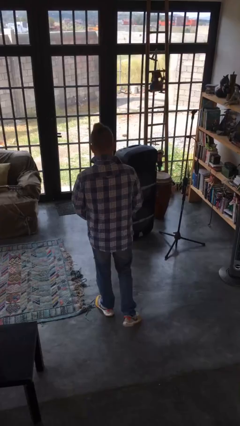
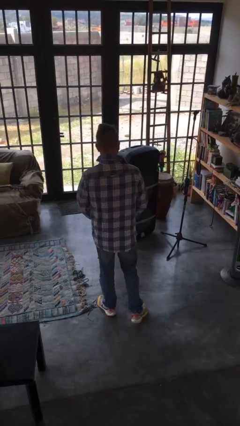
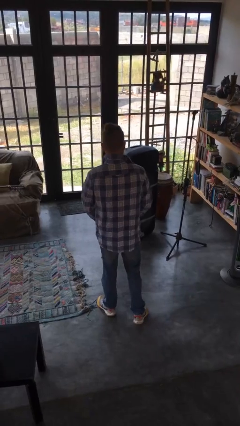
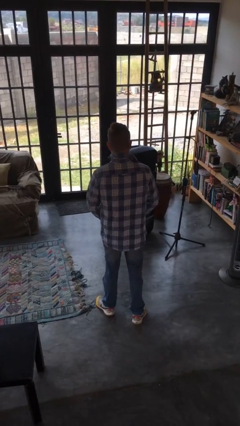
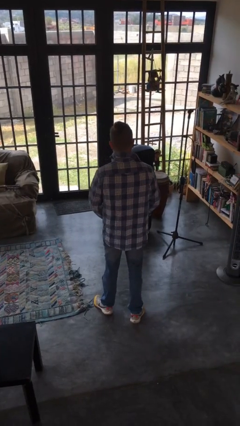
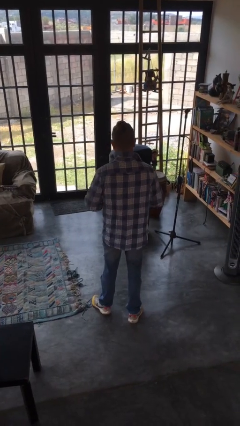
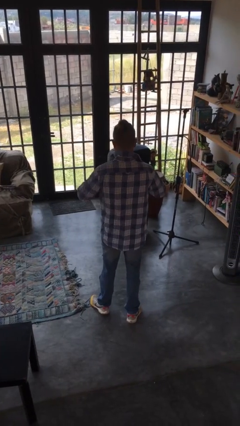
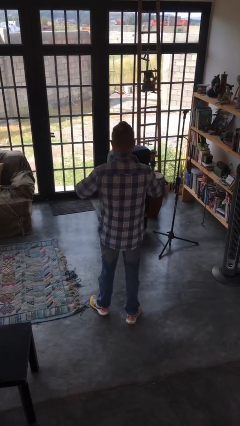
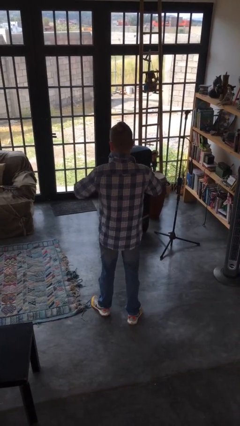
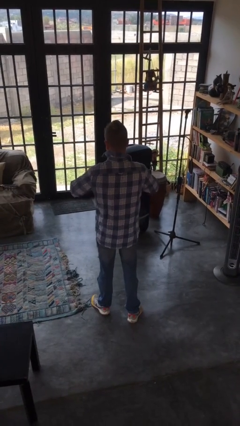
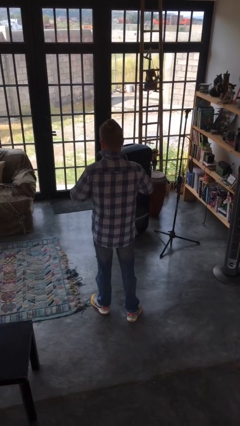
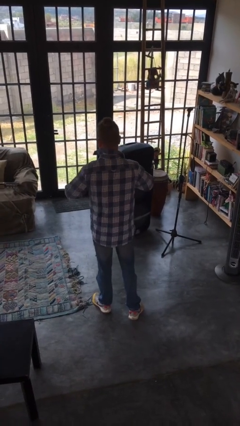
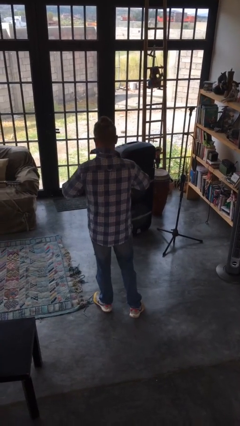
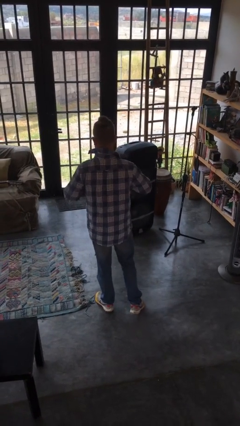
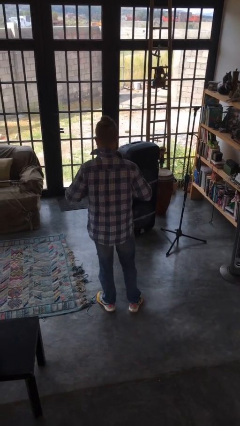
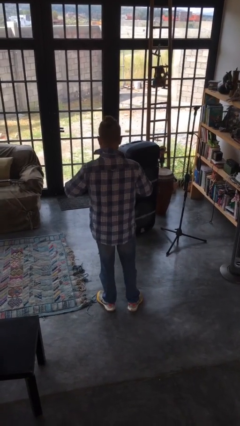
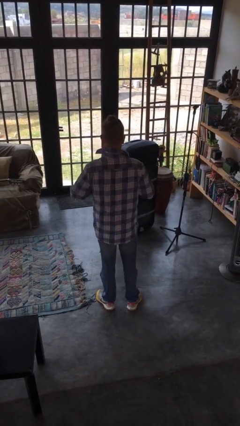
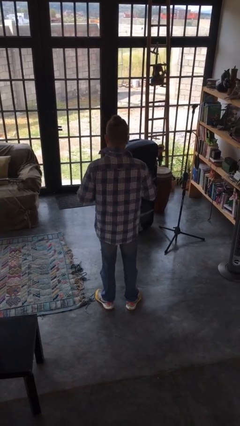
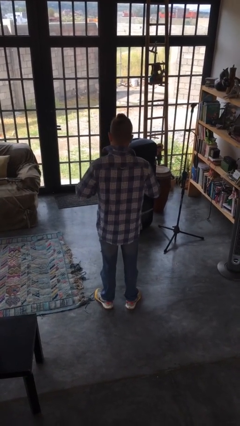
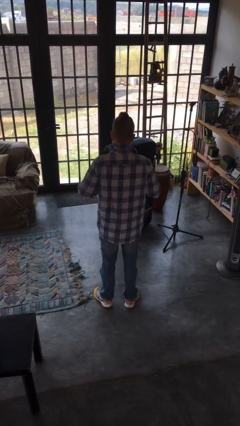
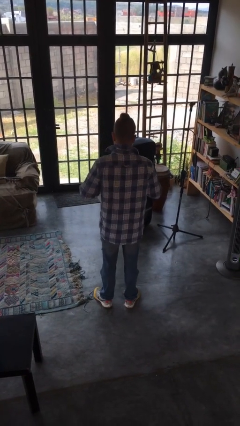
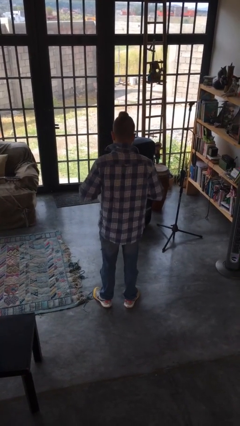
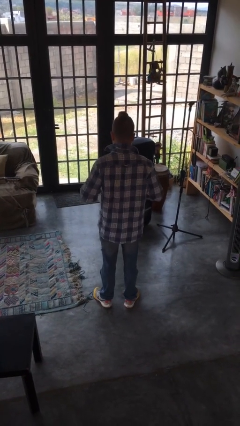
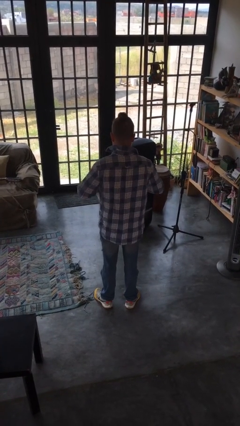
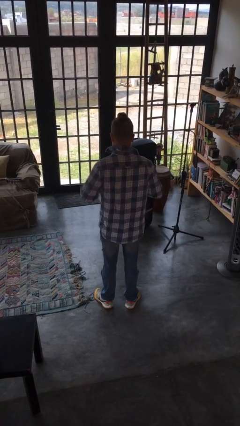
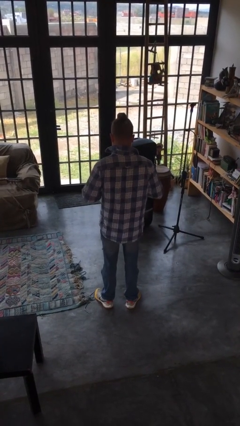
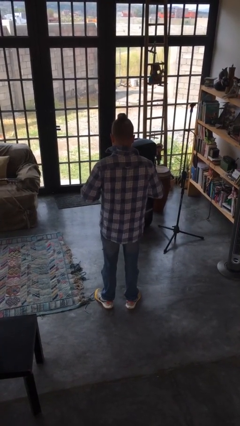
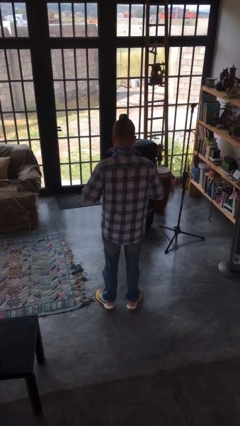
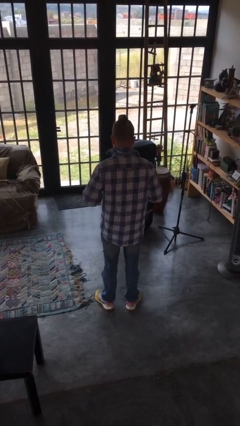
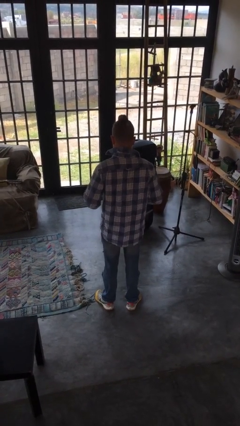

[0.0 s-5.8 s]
person unbuttons shirt

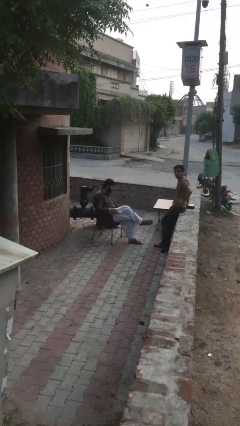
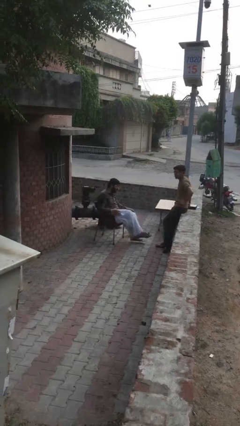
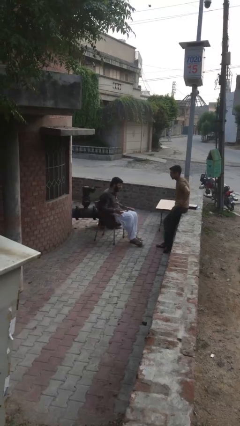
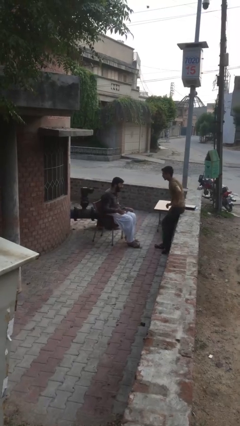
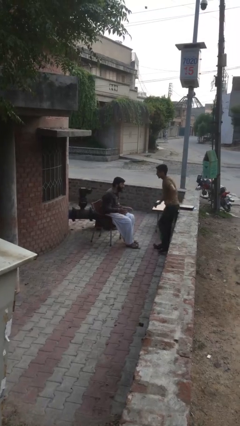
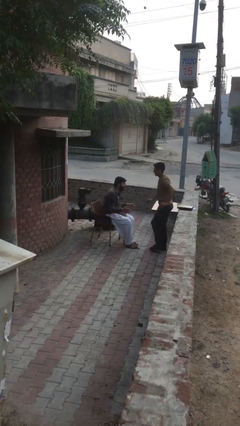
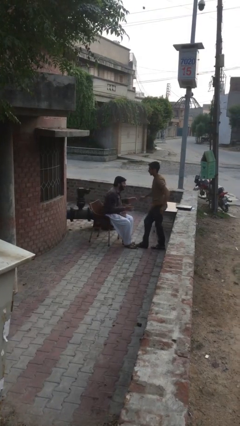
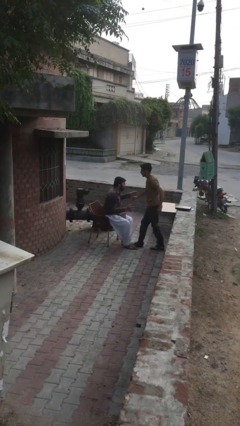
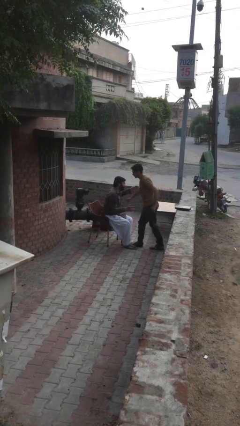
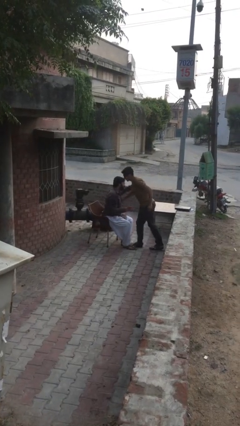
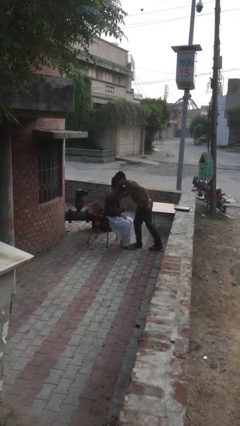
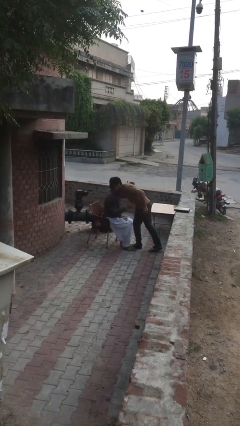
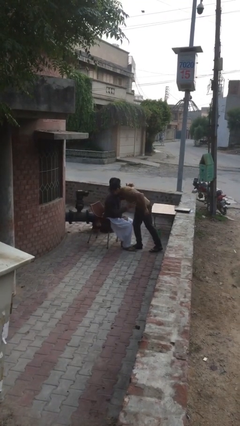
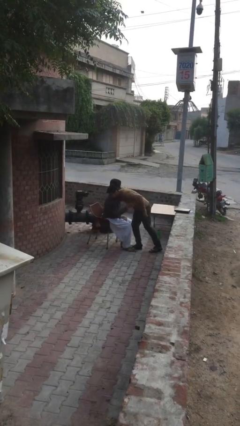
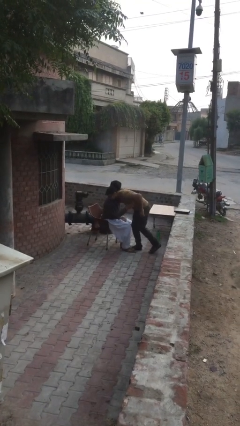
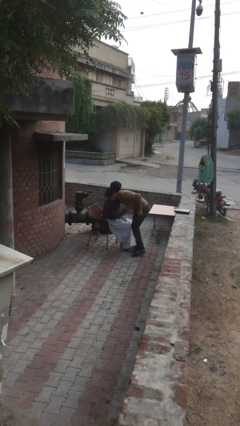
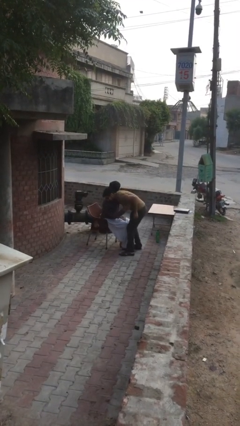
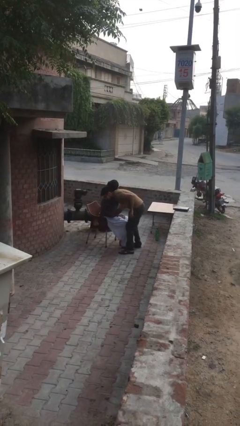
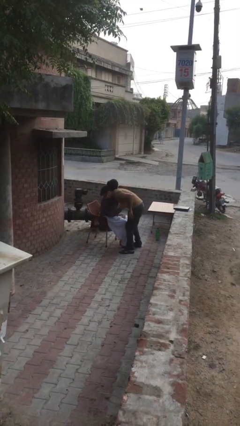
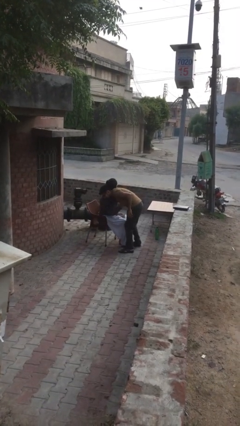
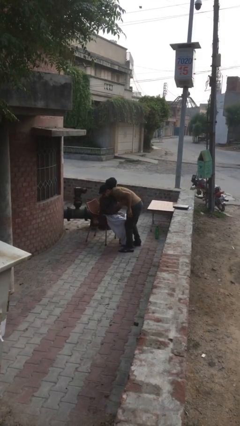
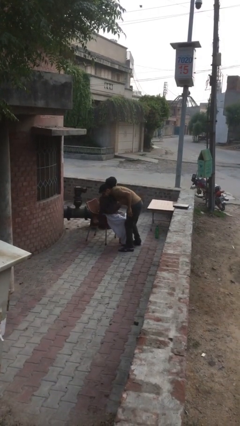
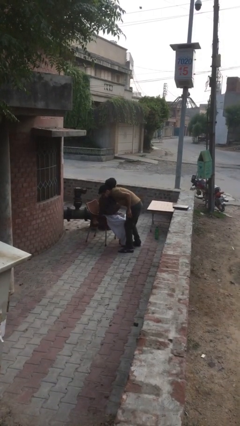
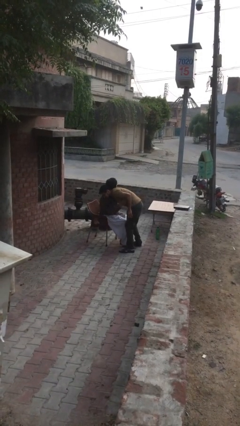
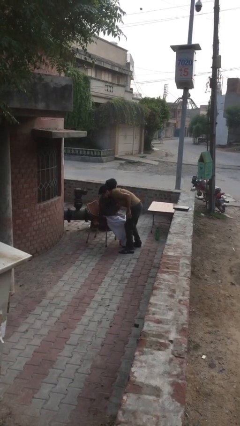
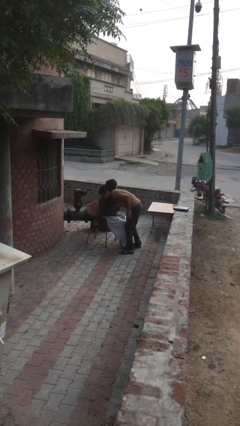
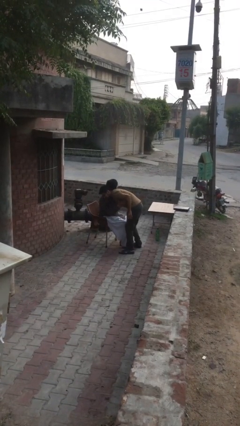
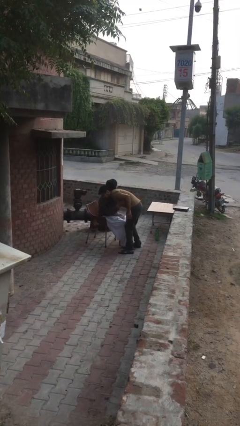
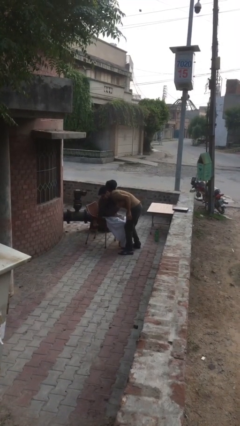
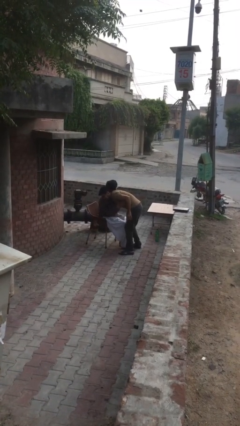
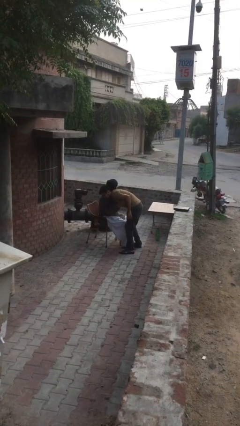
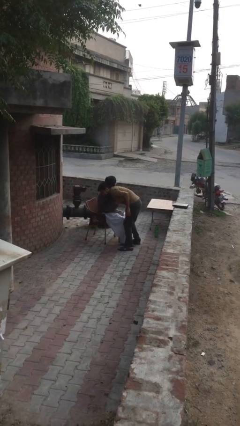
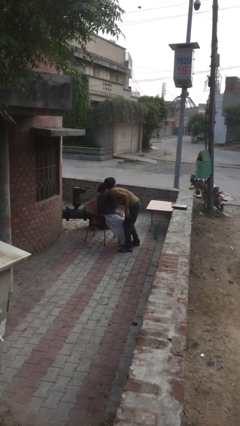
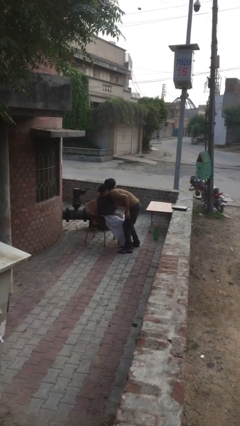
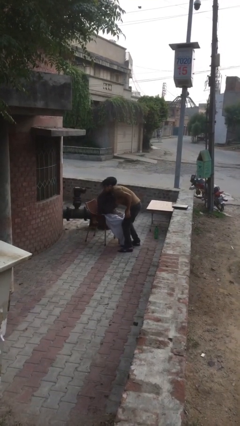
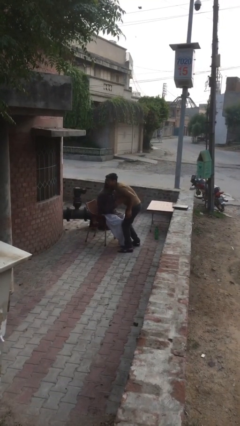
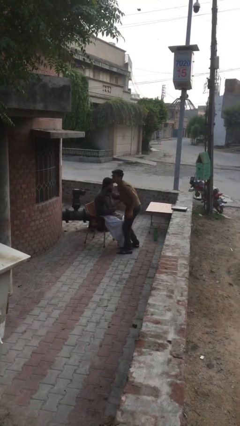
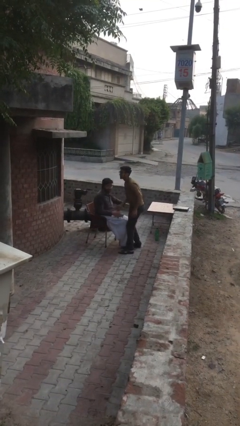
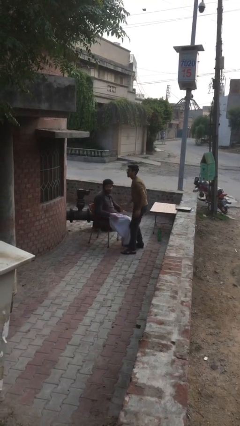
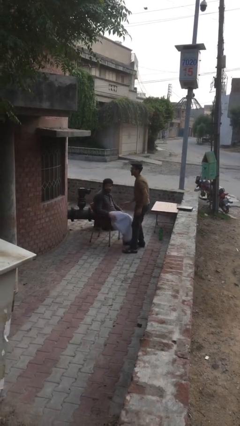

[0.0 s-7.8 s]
person embraces person

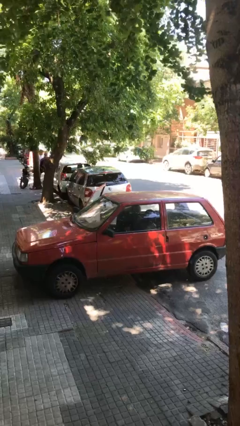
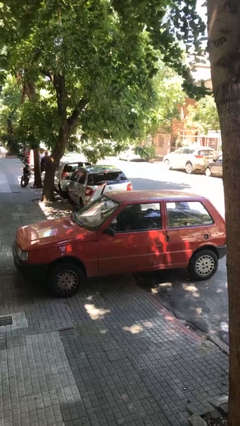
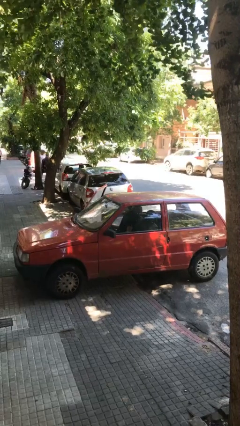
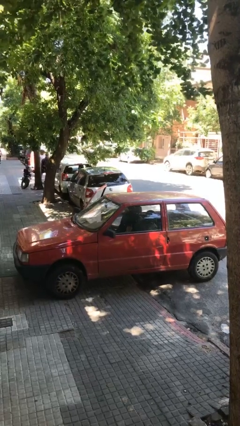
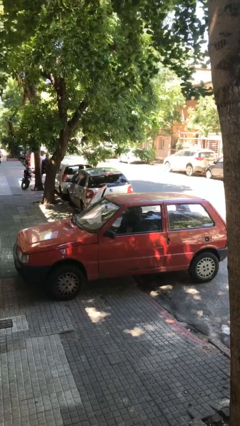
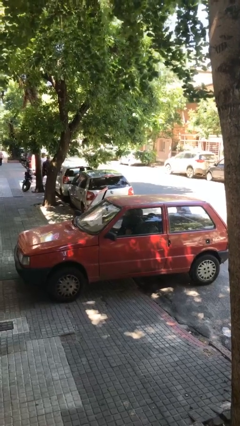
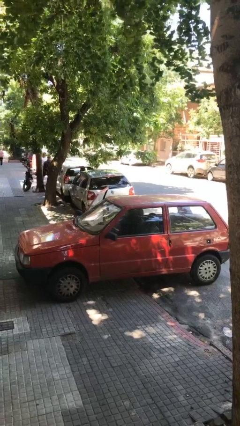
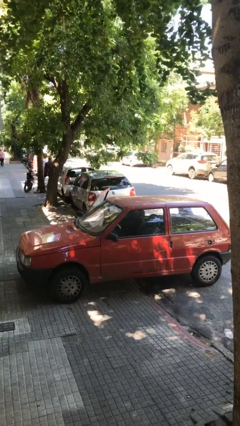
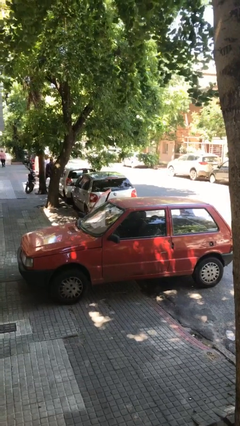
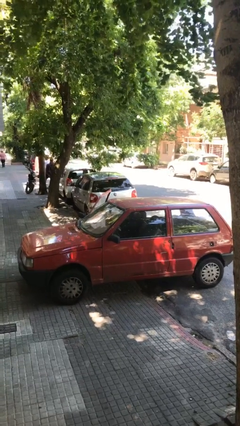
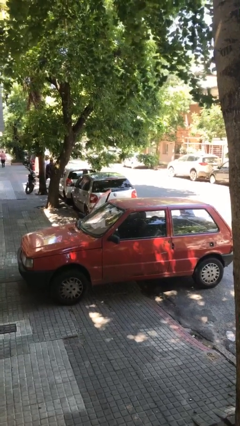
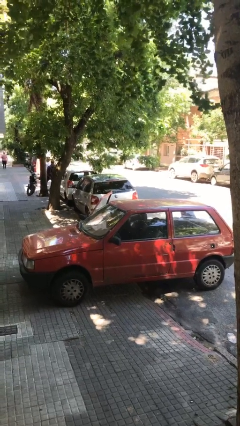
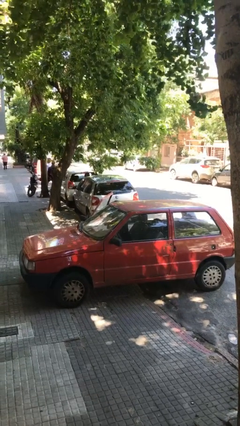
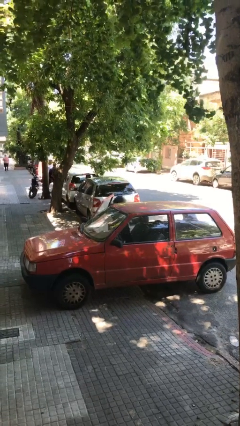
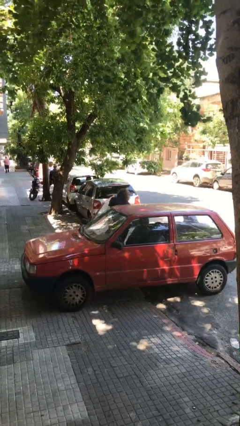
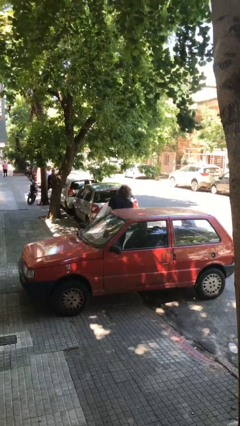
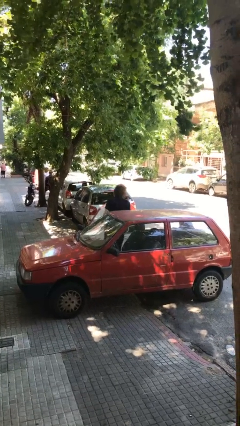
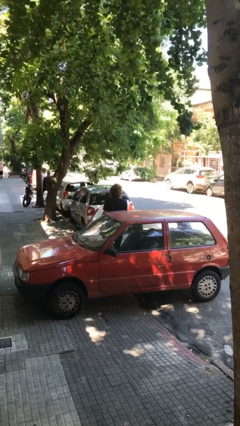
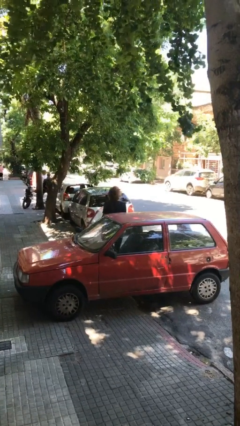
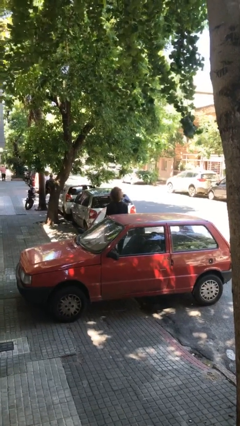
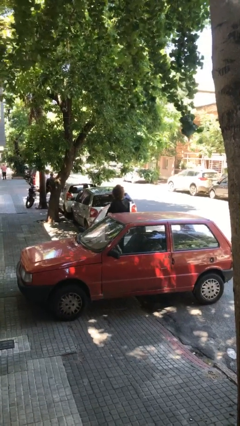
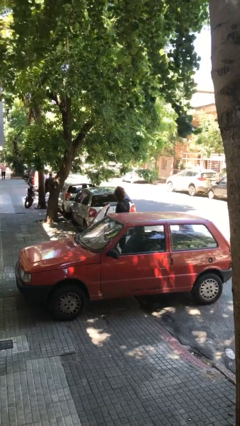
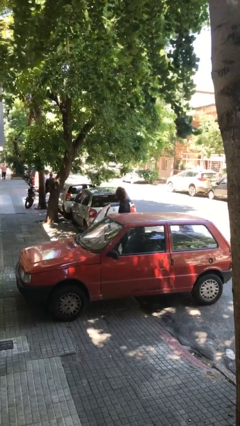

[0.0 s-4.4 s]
person exits car
